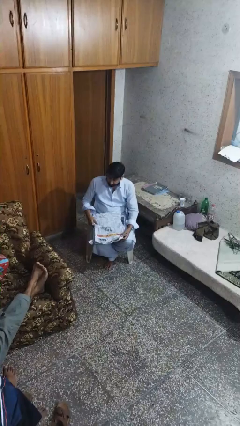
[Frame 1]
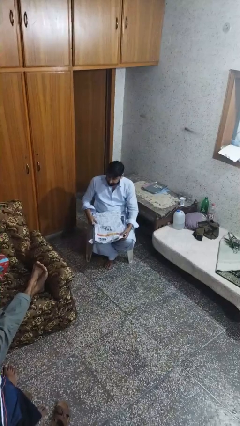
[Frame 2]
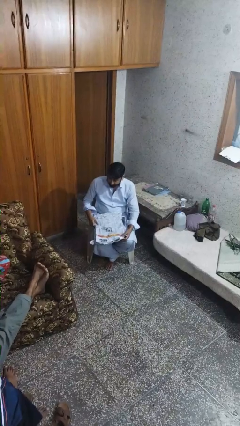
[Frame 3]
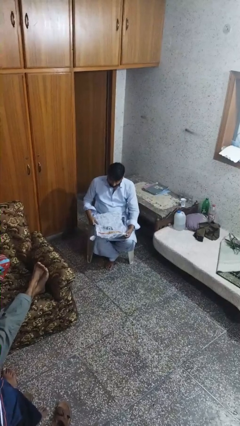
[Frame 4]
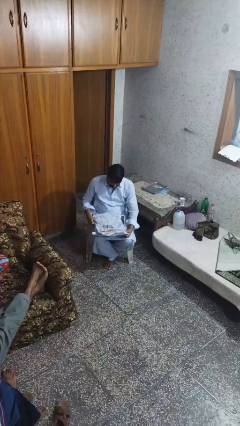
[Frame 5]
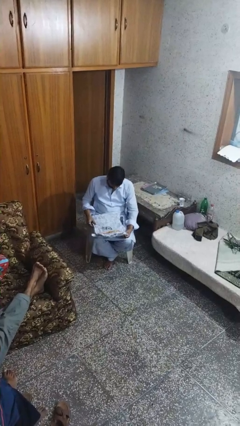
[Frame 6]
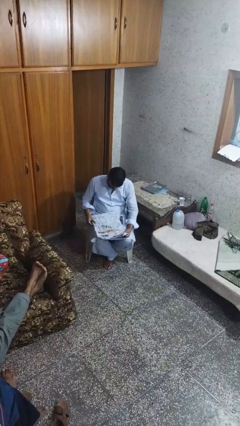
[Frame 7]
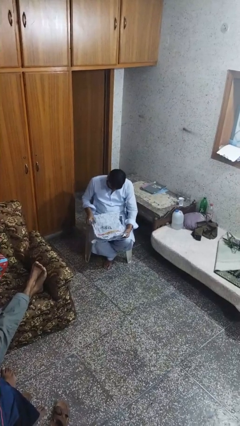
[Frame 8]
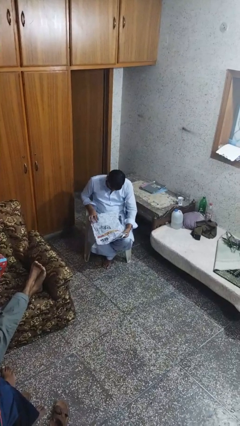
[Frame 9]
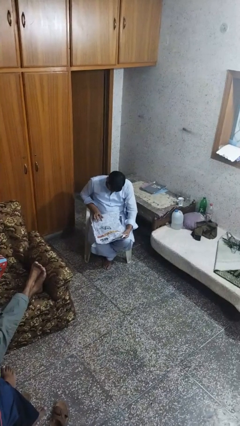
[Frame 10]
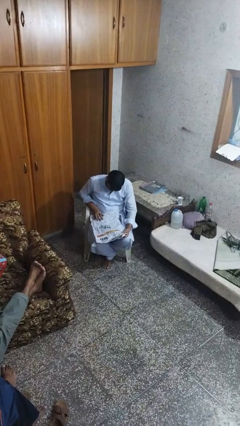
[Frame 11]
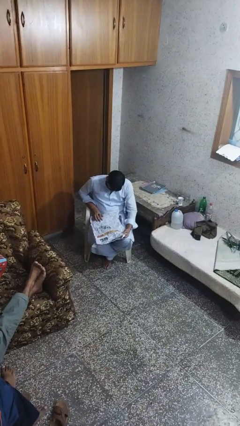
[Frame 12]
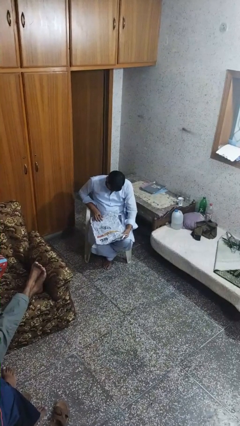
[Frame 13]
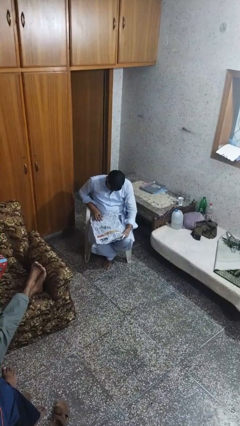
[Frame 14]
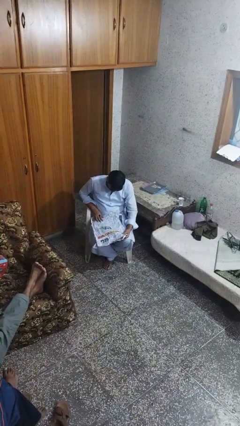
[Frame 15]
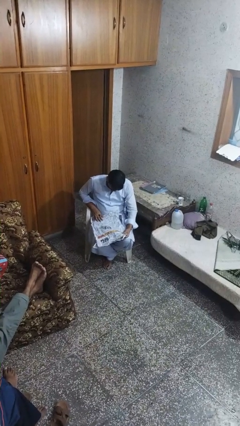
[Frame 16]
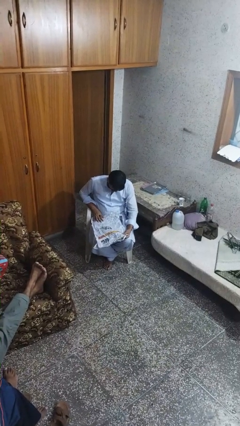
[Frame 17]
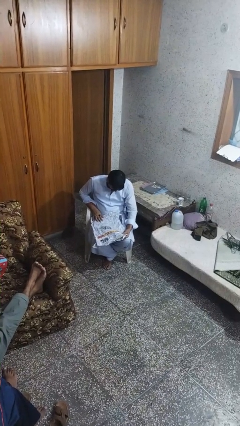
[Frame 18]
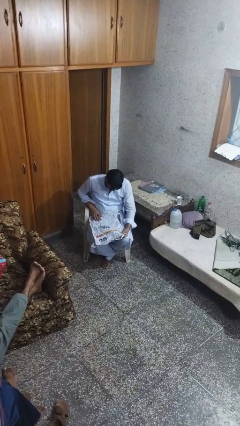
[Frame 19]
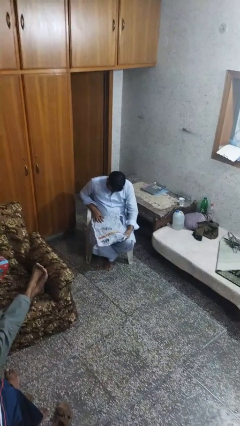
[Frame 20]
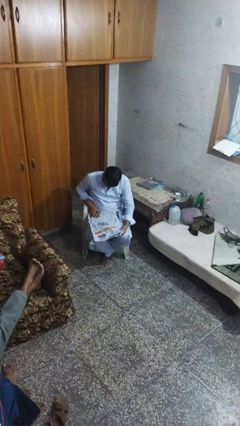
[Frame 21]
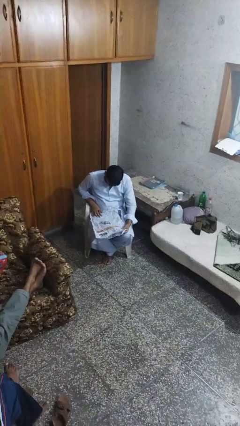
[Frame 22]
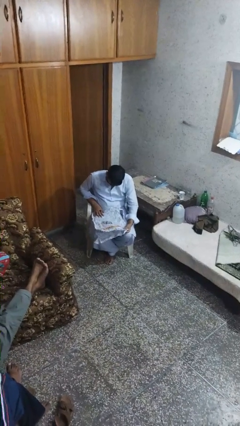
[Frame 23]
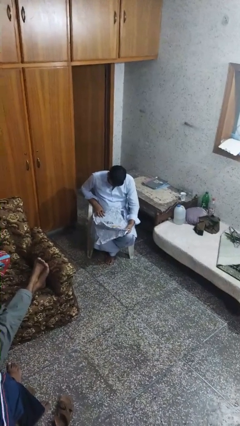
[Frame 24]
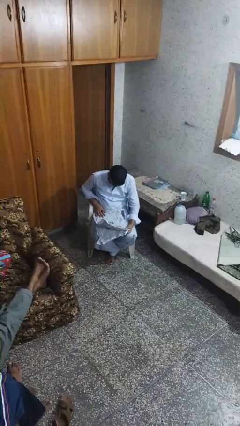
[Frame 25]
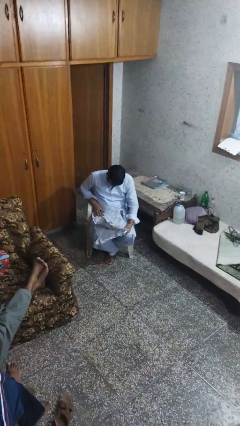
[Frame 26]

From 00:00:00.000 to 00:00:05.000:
person reads newspaper

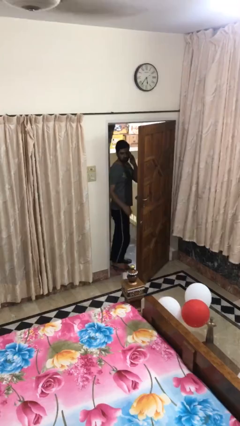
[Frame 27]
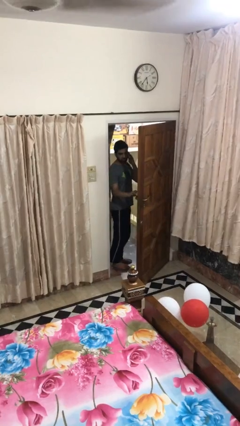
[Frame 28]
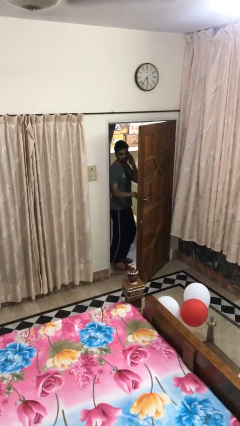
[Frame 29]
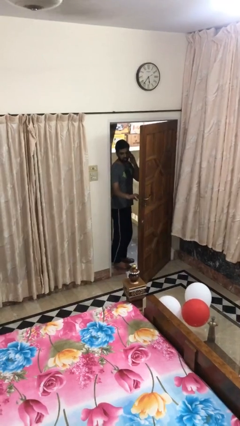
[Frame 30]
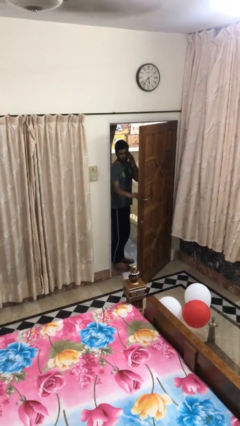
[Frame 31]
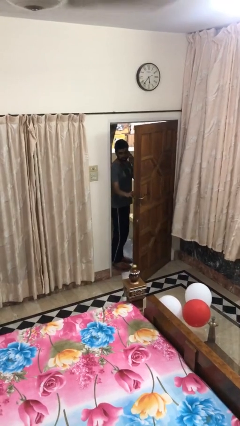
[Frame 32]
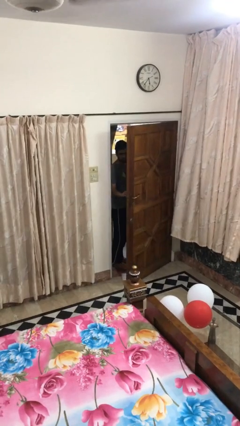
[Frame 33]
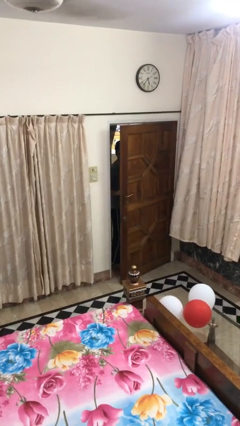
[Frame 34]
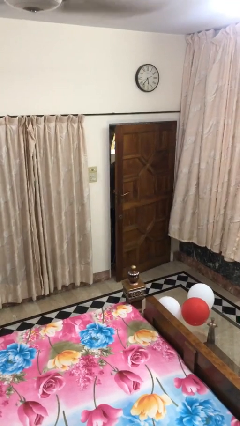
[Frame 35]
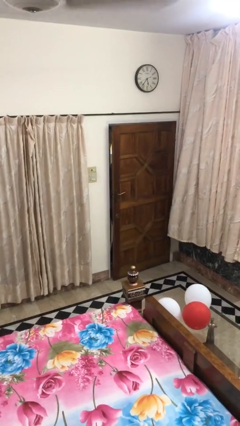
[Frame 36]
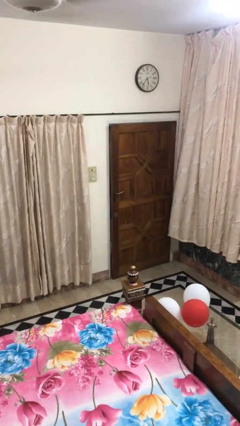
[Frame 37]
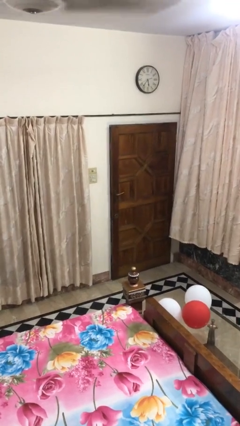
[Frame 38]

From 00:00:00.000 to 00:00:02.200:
person closes facility door

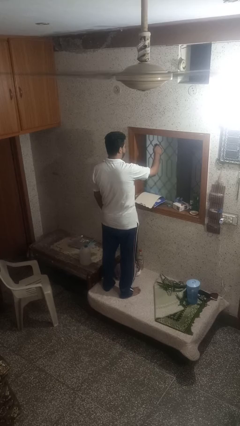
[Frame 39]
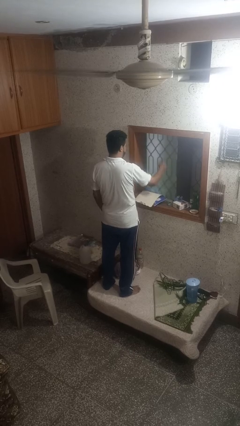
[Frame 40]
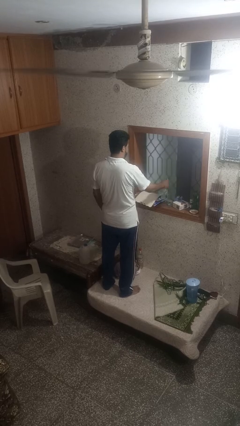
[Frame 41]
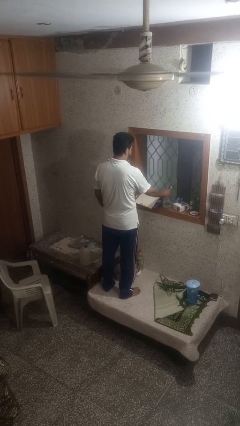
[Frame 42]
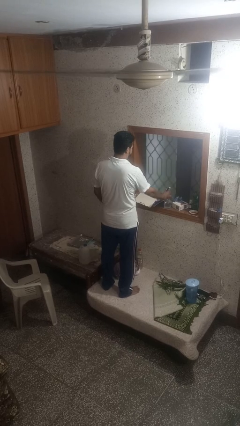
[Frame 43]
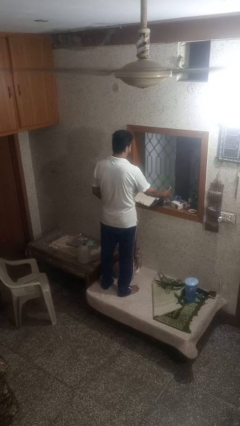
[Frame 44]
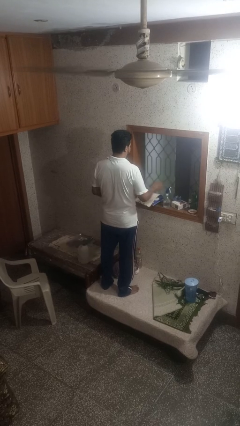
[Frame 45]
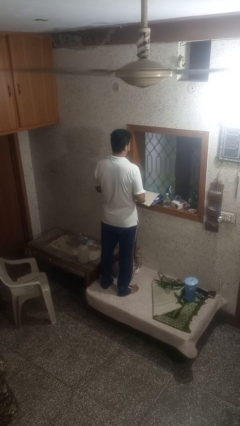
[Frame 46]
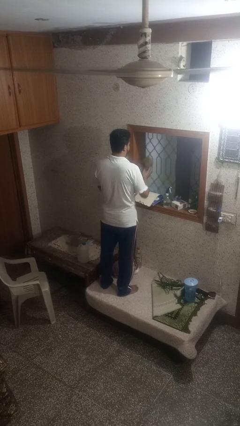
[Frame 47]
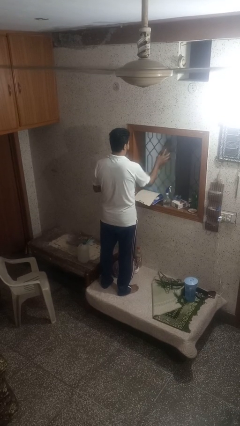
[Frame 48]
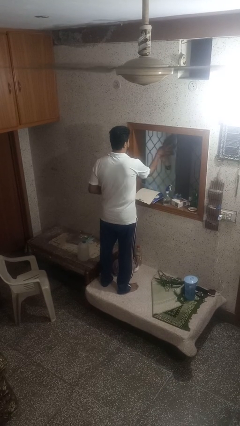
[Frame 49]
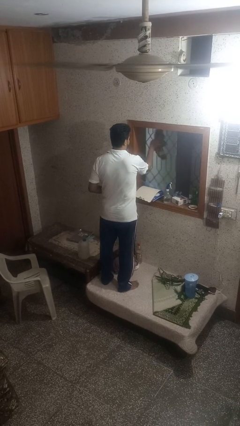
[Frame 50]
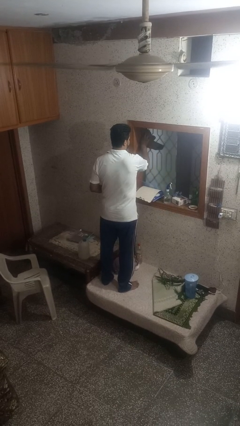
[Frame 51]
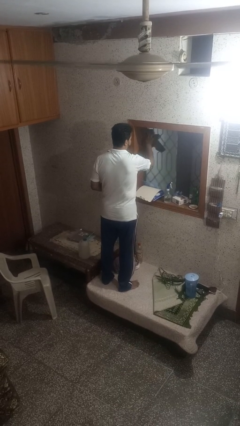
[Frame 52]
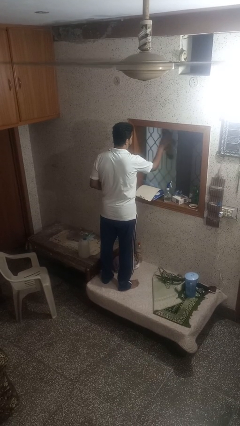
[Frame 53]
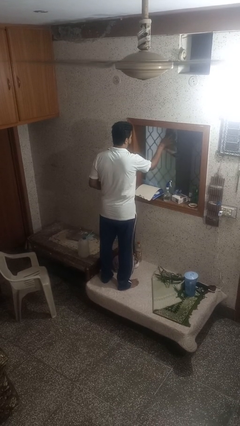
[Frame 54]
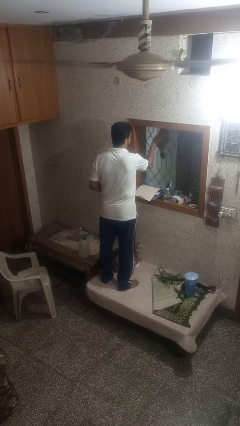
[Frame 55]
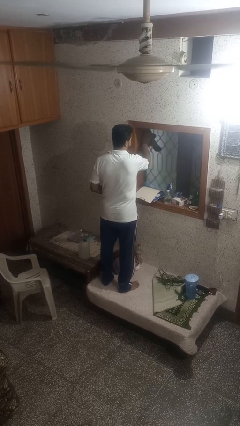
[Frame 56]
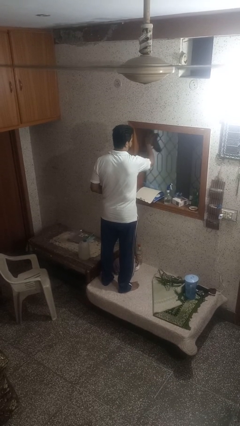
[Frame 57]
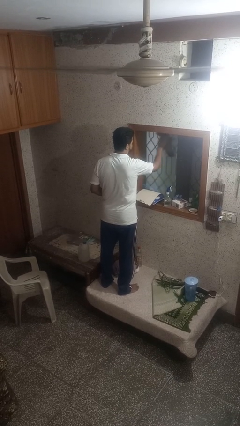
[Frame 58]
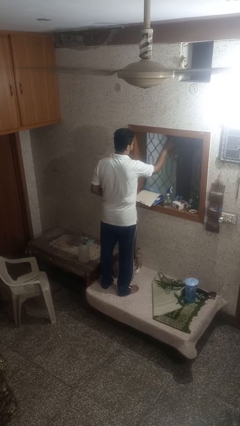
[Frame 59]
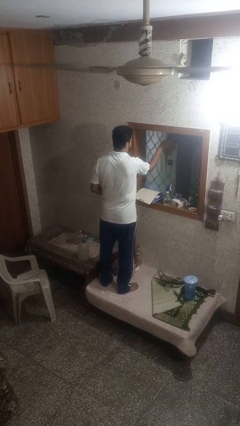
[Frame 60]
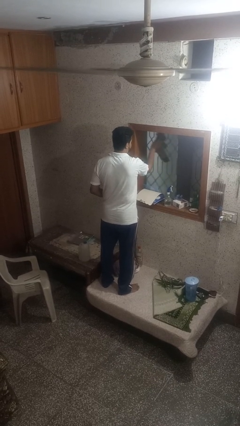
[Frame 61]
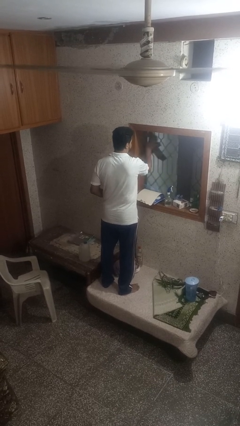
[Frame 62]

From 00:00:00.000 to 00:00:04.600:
person washes window

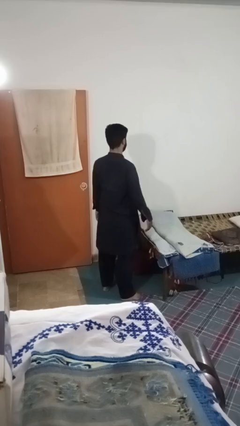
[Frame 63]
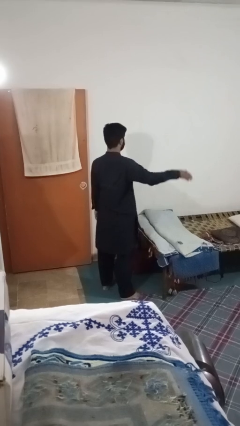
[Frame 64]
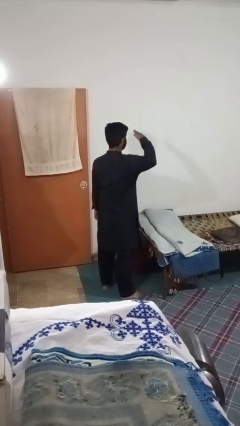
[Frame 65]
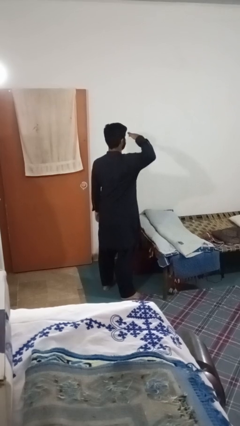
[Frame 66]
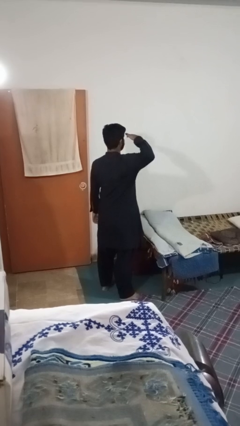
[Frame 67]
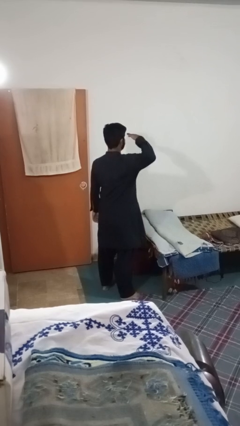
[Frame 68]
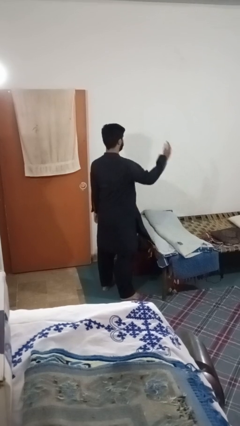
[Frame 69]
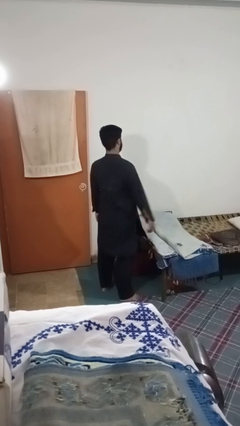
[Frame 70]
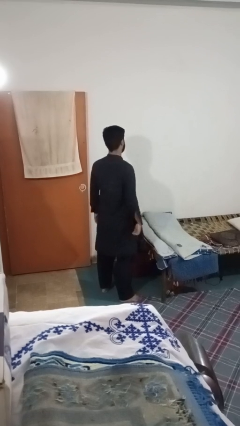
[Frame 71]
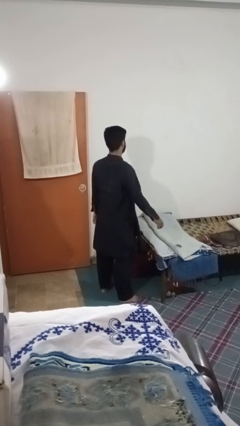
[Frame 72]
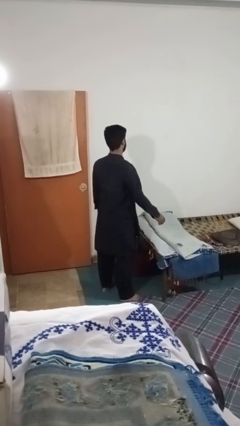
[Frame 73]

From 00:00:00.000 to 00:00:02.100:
person salutes

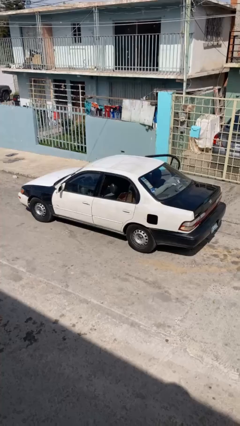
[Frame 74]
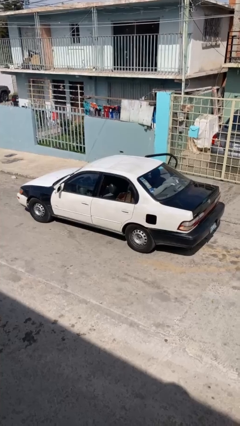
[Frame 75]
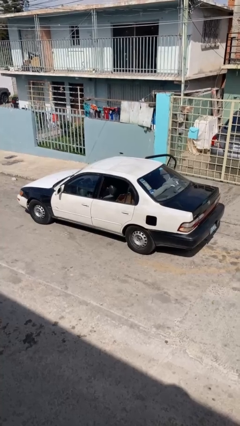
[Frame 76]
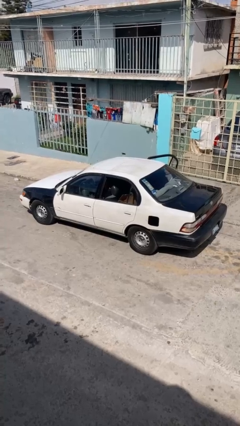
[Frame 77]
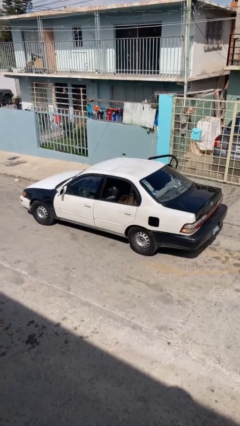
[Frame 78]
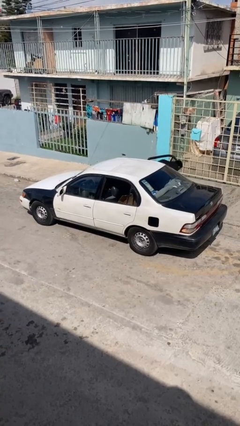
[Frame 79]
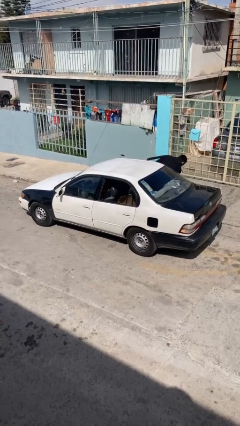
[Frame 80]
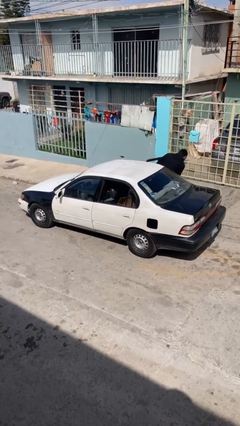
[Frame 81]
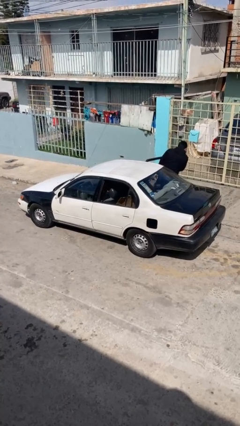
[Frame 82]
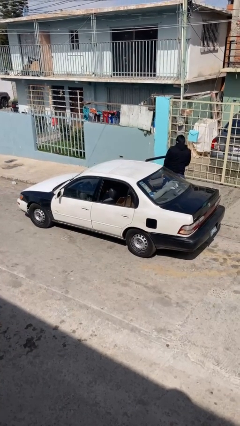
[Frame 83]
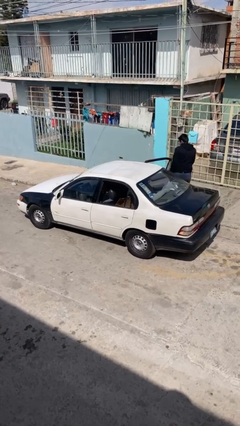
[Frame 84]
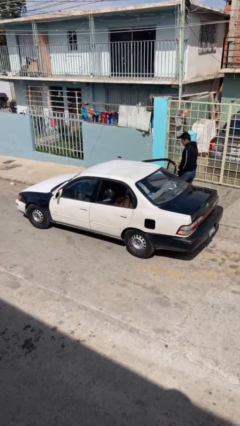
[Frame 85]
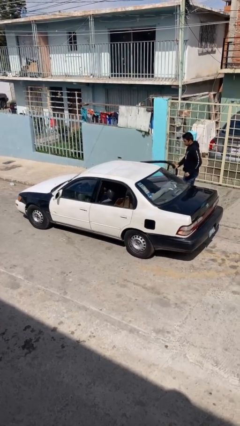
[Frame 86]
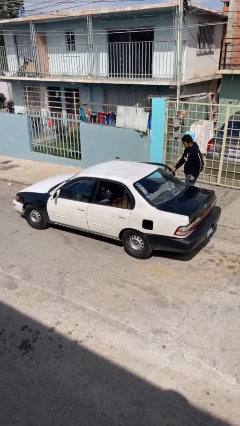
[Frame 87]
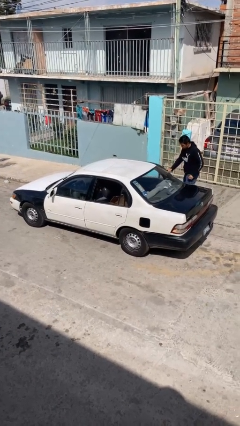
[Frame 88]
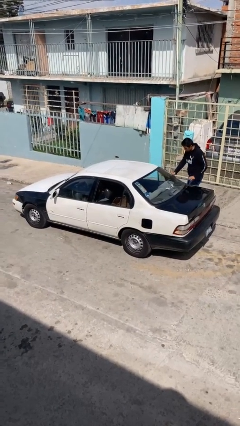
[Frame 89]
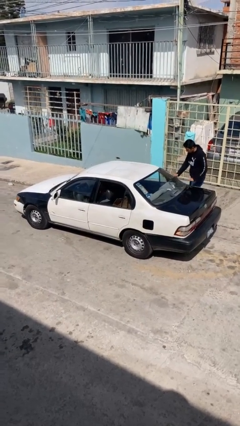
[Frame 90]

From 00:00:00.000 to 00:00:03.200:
car drops off person

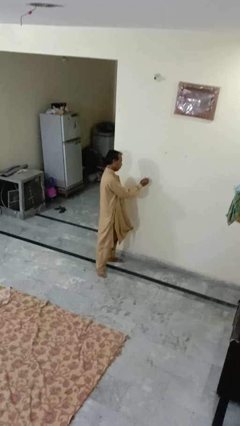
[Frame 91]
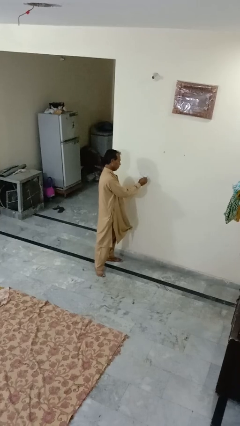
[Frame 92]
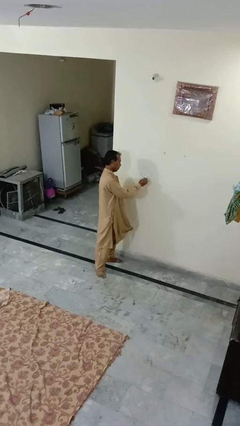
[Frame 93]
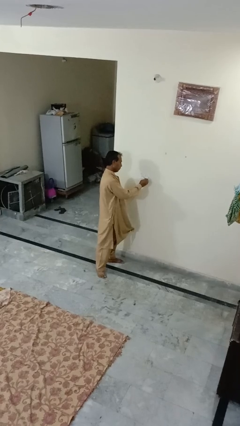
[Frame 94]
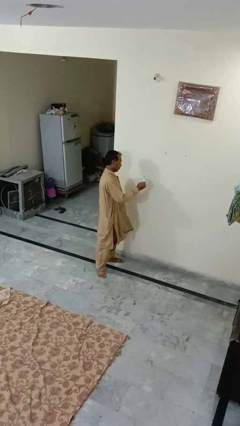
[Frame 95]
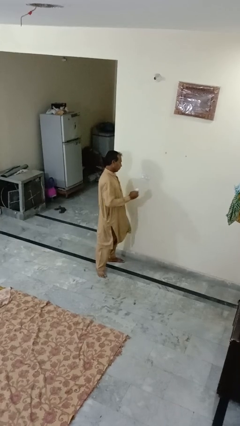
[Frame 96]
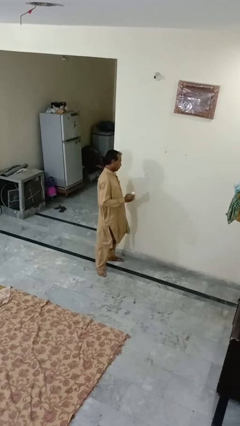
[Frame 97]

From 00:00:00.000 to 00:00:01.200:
person unplugs from electrical socket
